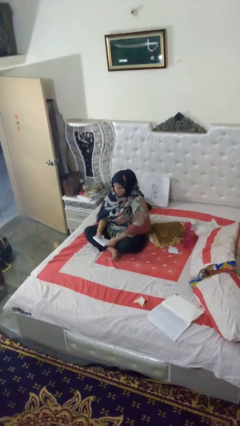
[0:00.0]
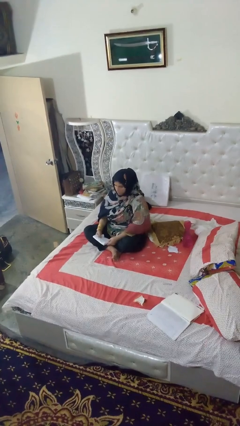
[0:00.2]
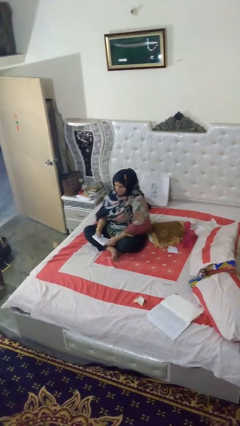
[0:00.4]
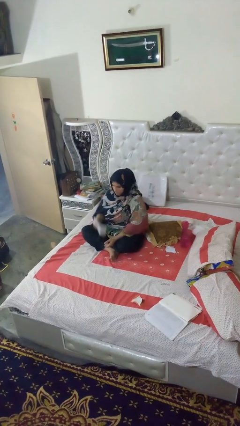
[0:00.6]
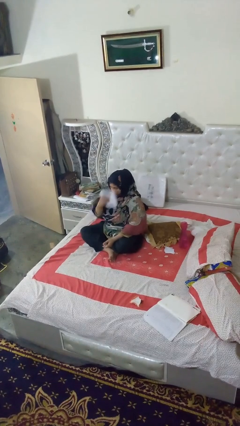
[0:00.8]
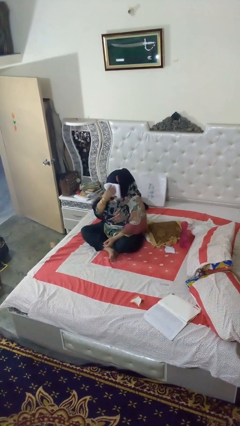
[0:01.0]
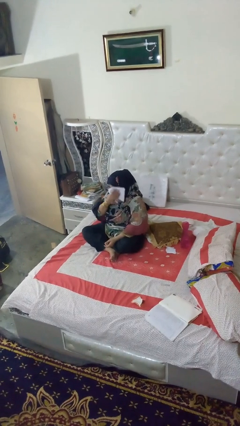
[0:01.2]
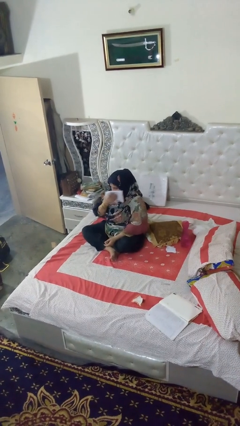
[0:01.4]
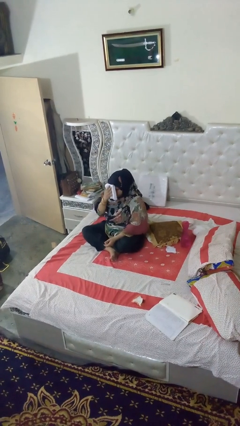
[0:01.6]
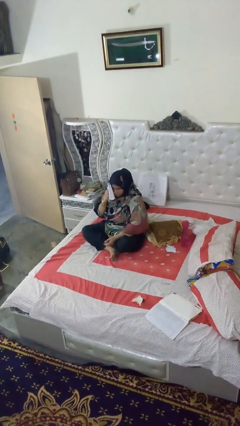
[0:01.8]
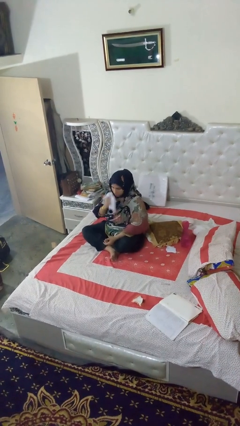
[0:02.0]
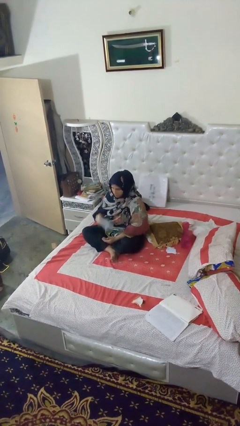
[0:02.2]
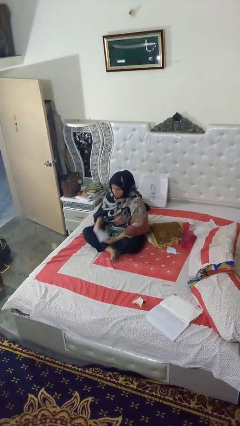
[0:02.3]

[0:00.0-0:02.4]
person wipes mouth with napkin

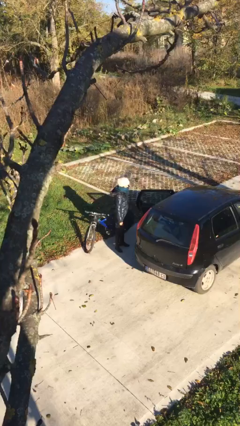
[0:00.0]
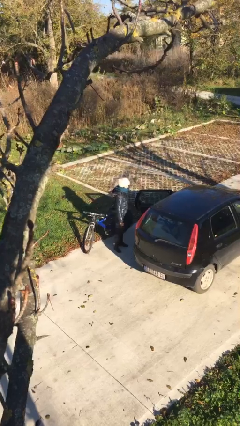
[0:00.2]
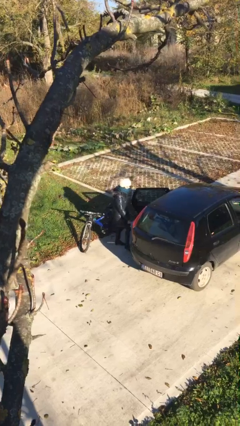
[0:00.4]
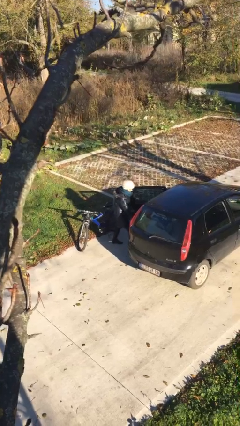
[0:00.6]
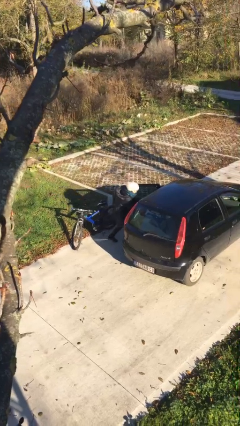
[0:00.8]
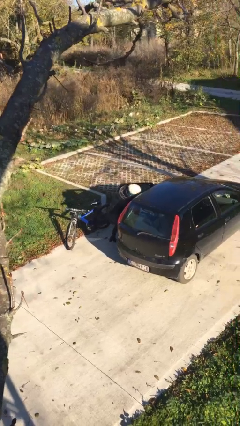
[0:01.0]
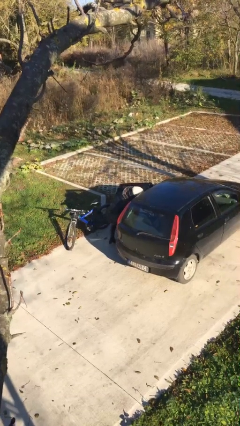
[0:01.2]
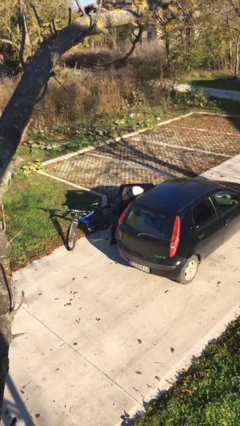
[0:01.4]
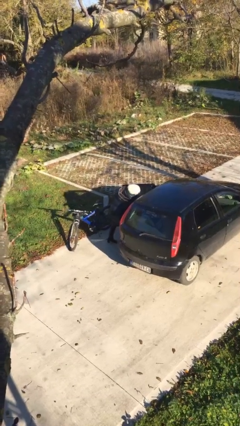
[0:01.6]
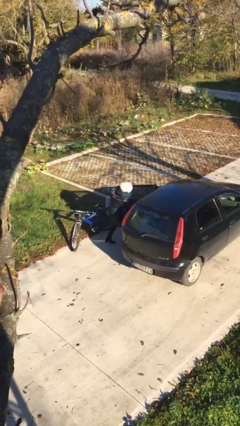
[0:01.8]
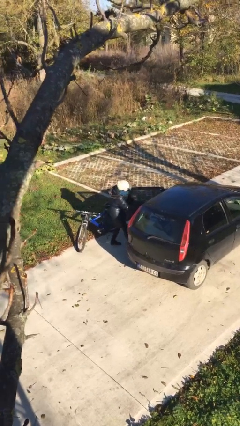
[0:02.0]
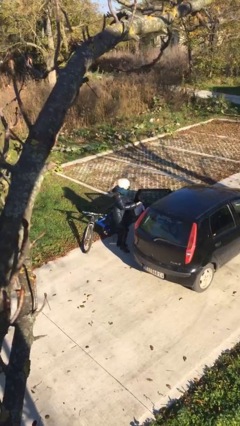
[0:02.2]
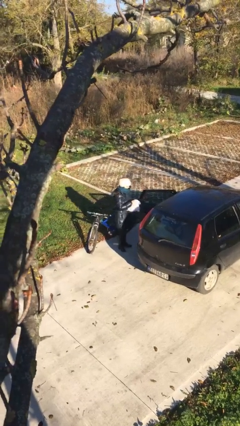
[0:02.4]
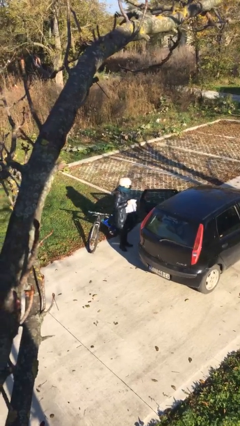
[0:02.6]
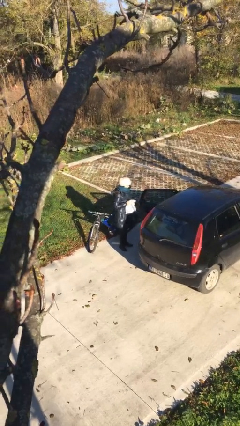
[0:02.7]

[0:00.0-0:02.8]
person unloads car

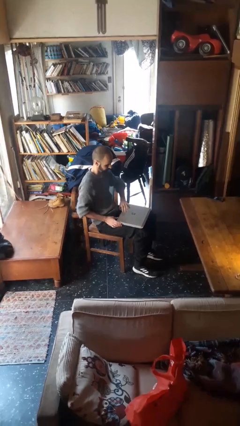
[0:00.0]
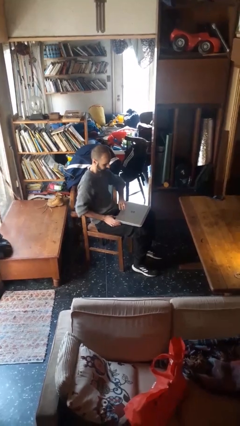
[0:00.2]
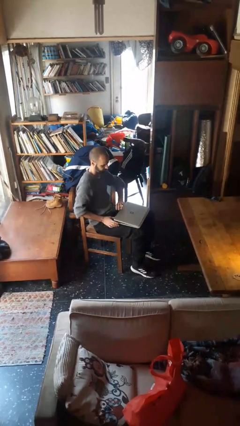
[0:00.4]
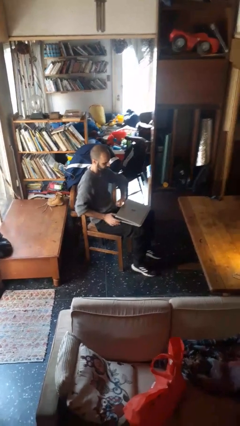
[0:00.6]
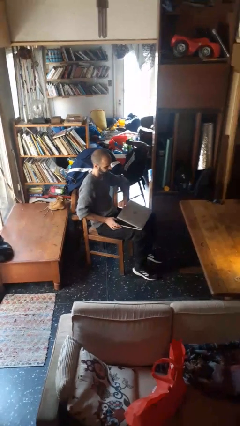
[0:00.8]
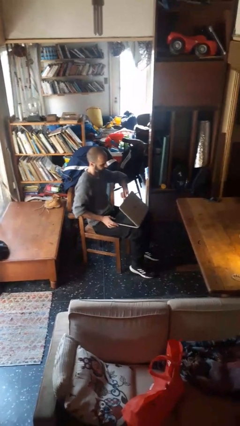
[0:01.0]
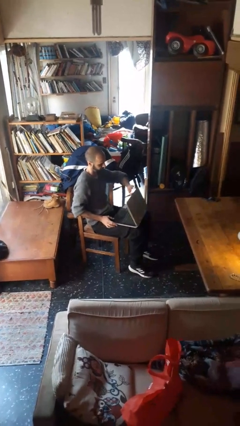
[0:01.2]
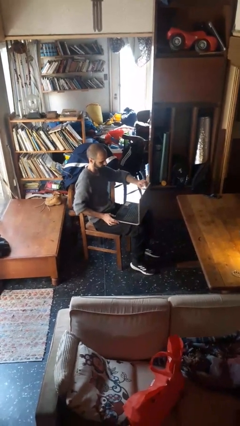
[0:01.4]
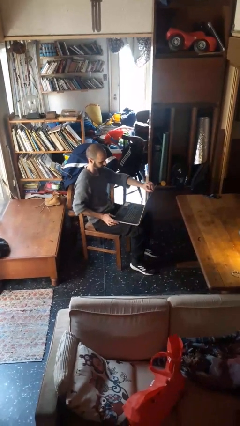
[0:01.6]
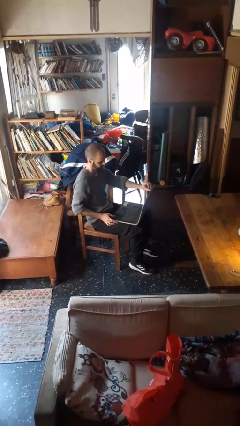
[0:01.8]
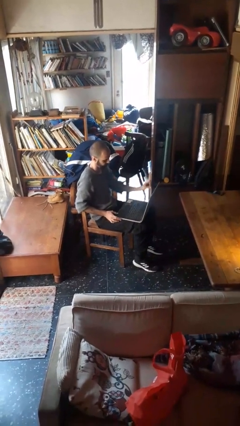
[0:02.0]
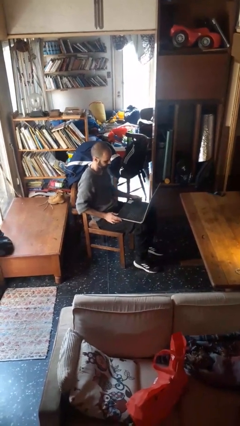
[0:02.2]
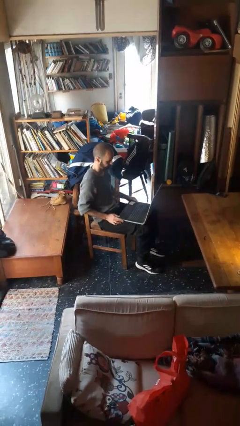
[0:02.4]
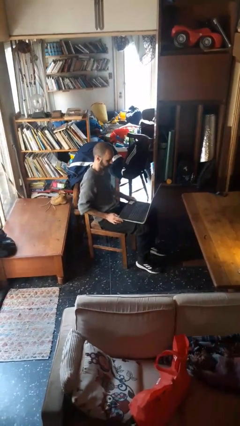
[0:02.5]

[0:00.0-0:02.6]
person opens laptop

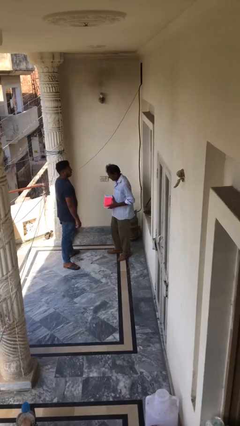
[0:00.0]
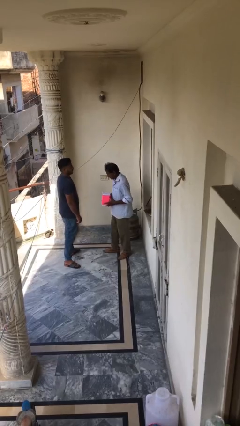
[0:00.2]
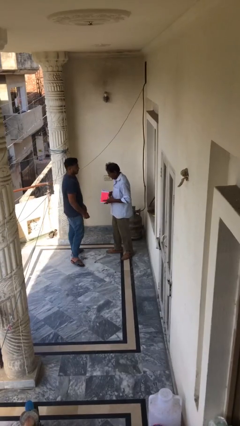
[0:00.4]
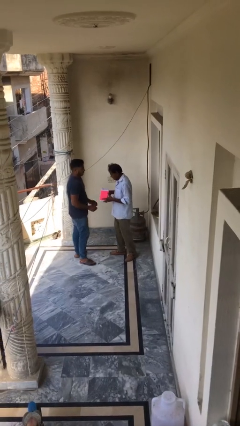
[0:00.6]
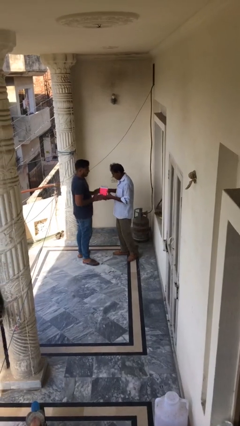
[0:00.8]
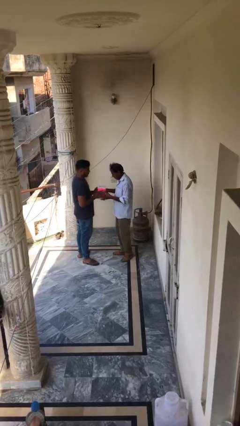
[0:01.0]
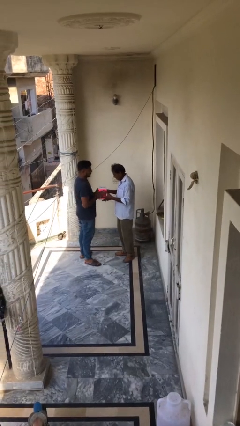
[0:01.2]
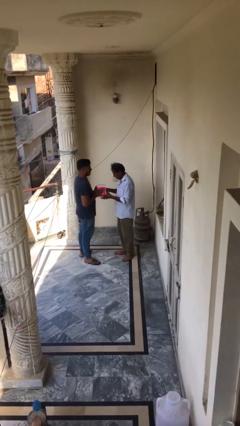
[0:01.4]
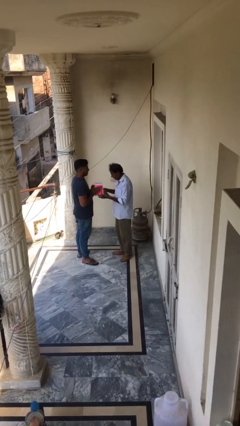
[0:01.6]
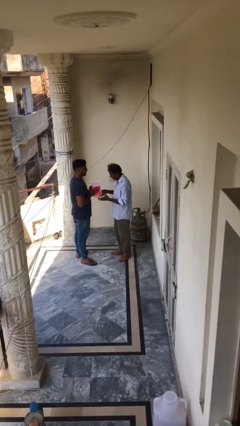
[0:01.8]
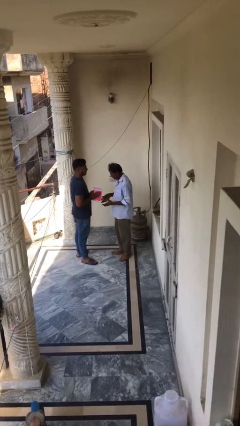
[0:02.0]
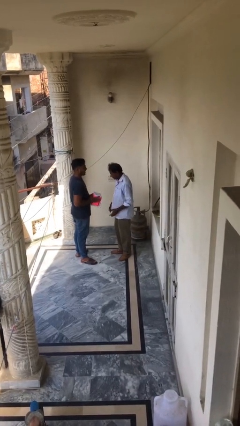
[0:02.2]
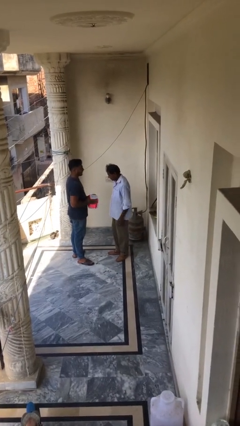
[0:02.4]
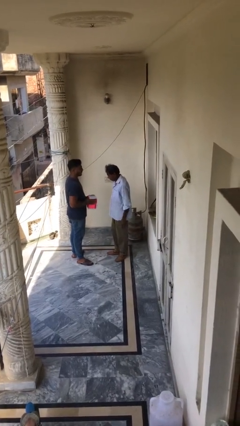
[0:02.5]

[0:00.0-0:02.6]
person transfers object to person

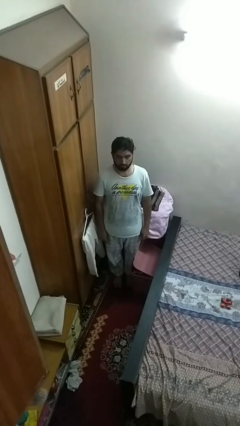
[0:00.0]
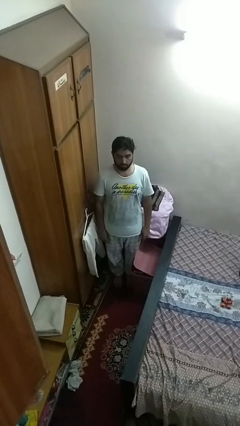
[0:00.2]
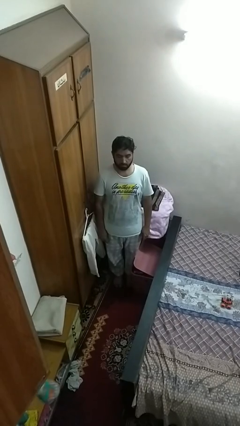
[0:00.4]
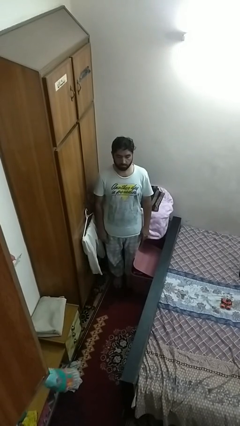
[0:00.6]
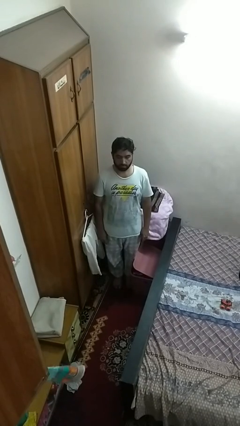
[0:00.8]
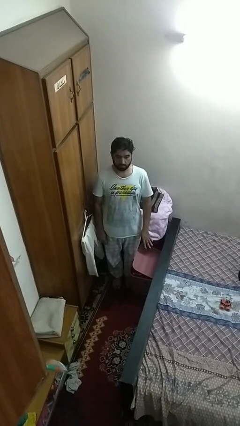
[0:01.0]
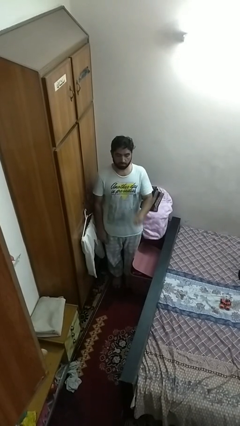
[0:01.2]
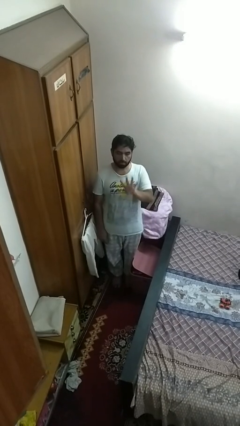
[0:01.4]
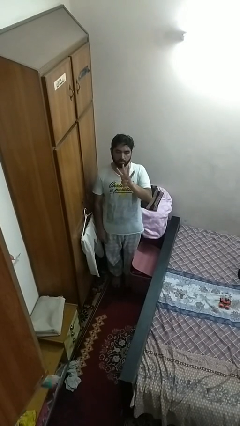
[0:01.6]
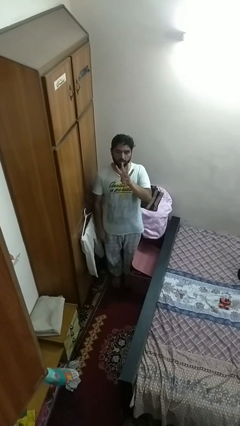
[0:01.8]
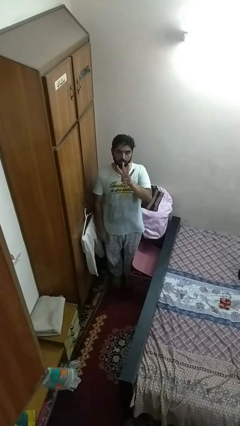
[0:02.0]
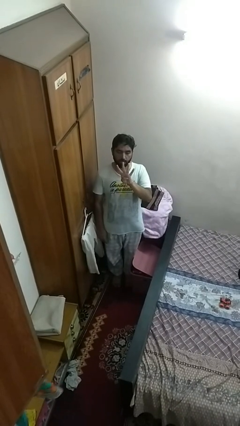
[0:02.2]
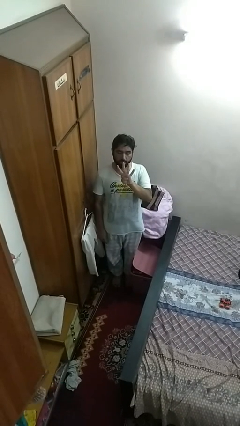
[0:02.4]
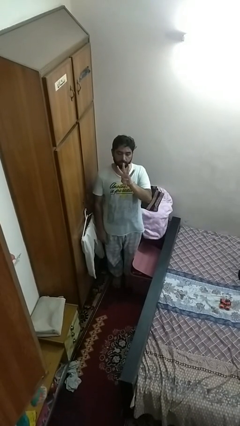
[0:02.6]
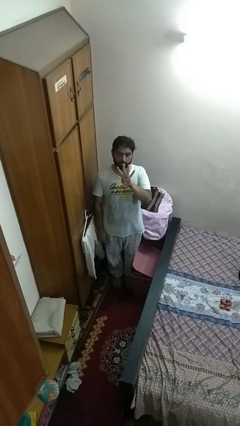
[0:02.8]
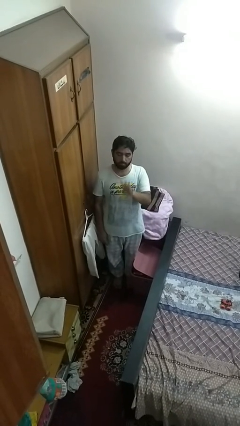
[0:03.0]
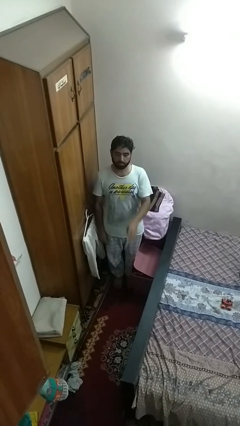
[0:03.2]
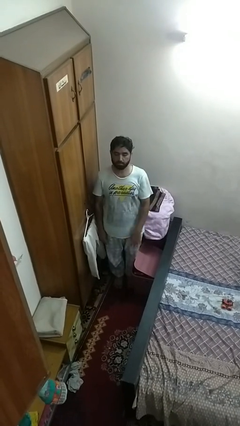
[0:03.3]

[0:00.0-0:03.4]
person gestures number four

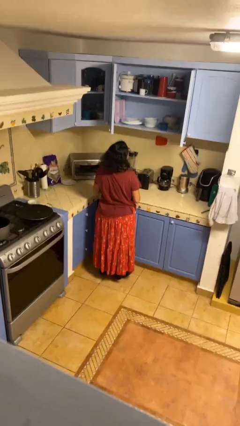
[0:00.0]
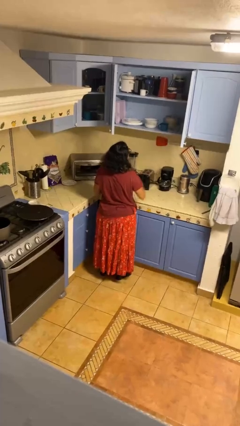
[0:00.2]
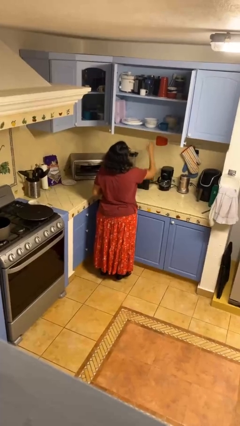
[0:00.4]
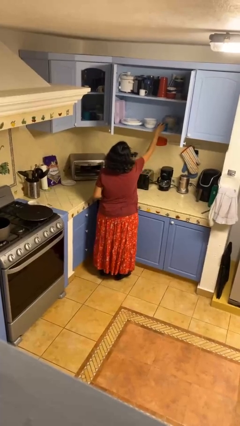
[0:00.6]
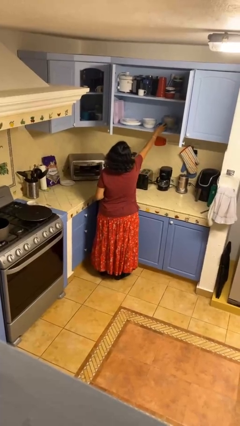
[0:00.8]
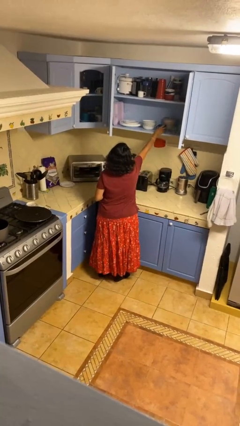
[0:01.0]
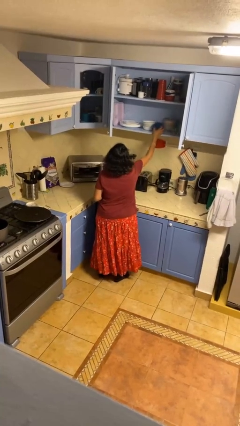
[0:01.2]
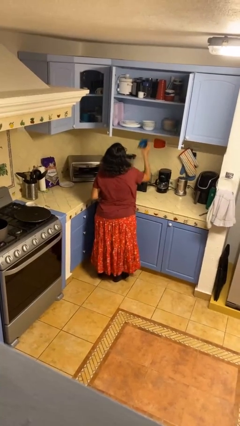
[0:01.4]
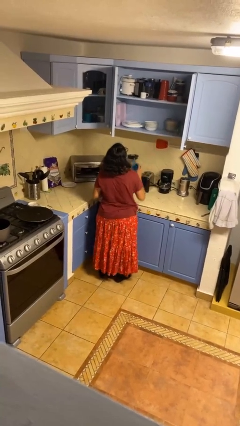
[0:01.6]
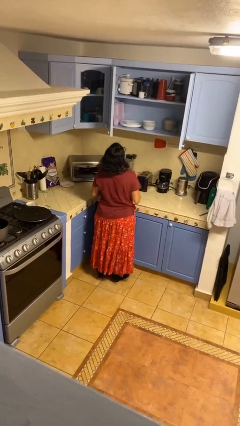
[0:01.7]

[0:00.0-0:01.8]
person picks up object from cabinet

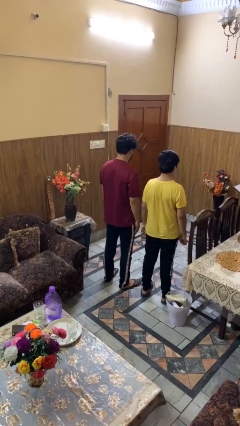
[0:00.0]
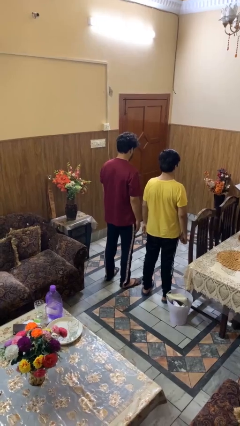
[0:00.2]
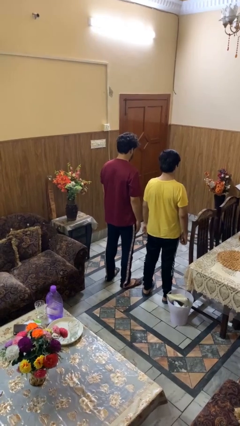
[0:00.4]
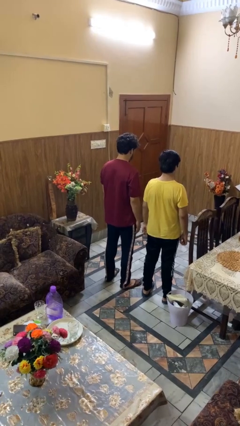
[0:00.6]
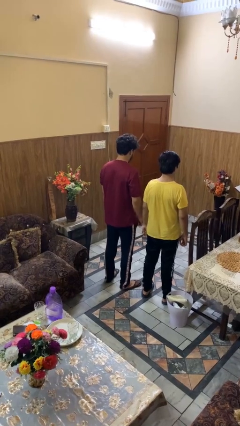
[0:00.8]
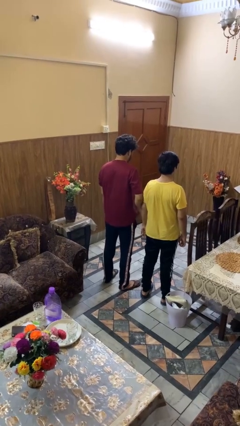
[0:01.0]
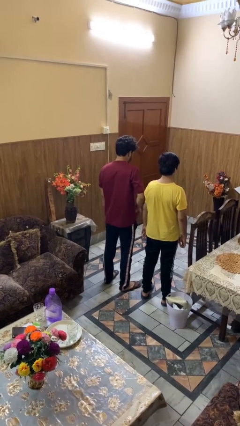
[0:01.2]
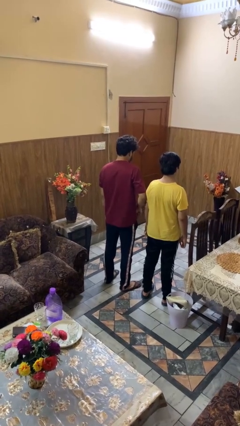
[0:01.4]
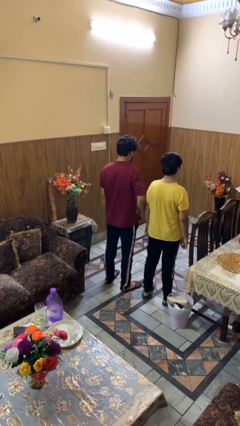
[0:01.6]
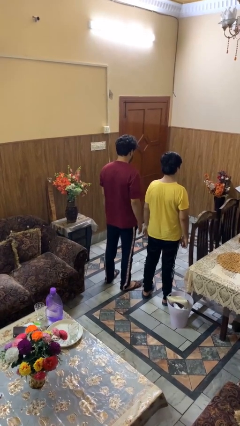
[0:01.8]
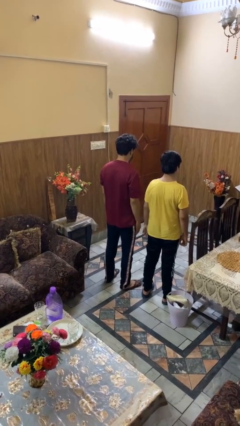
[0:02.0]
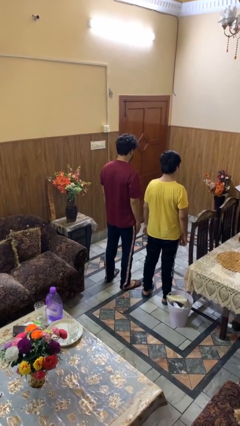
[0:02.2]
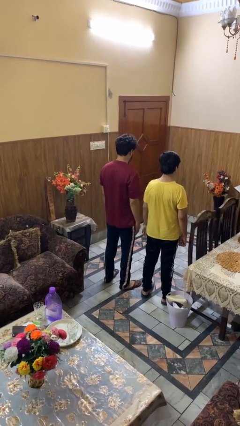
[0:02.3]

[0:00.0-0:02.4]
person nudges person with elbow
